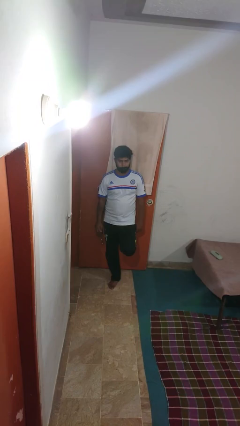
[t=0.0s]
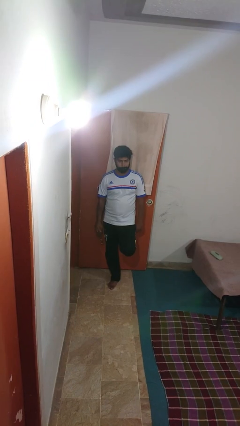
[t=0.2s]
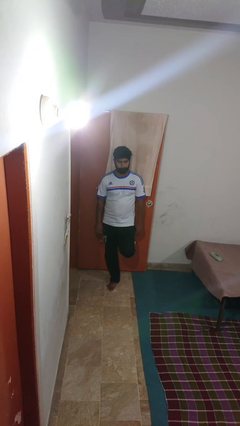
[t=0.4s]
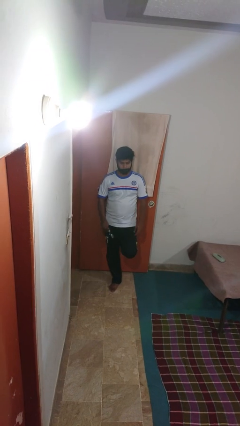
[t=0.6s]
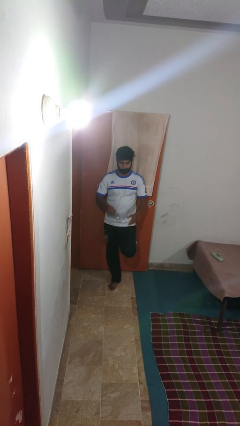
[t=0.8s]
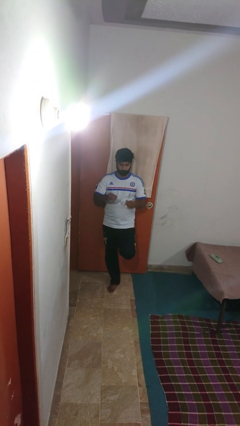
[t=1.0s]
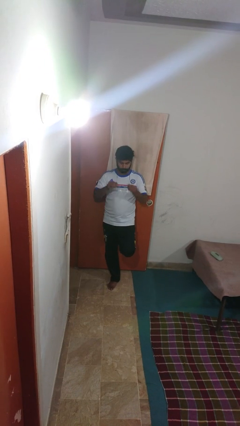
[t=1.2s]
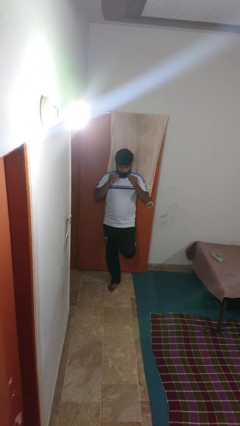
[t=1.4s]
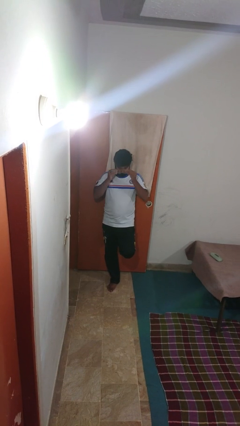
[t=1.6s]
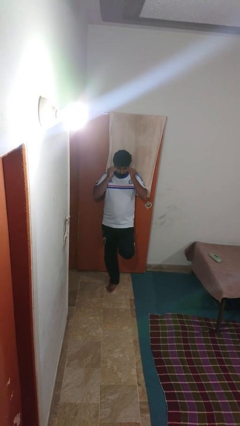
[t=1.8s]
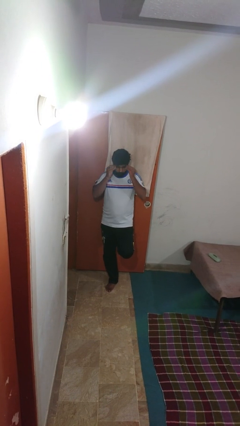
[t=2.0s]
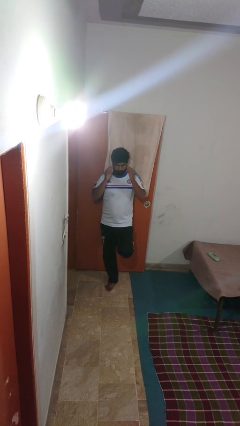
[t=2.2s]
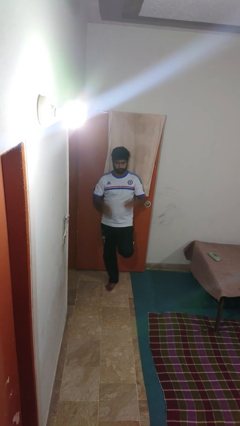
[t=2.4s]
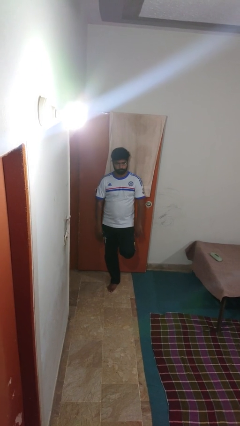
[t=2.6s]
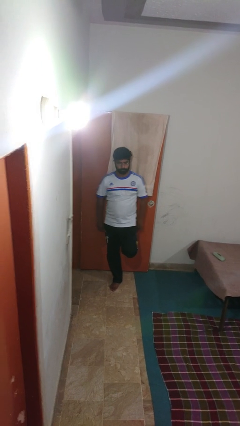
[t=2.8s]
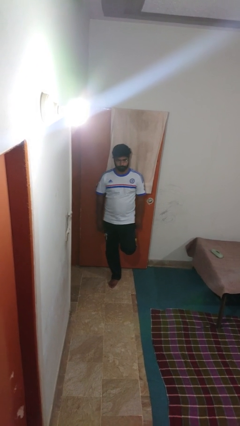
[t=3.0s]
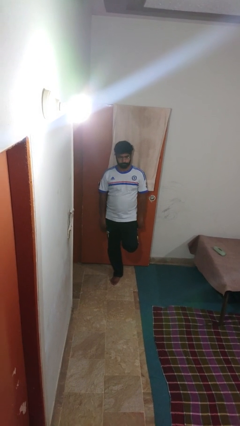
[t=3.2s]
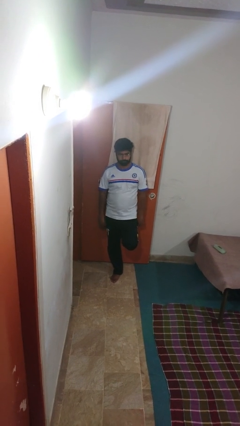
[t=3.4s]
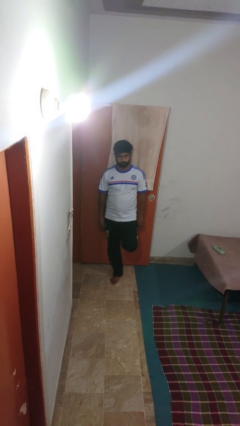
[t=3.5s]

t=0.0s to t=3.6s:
person puts on glasses

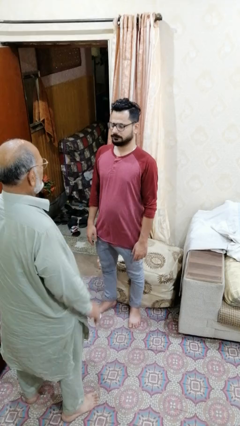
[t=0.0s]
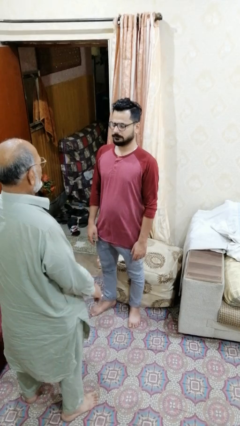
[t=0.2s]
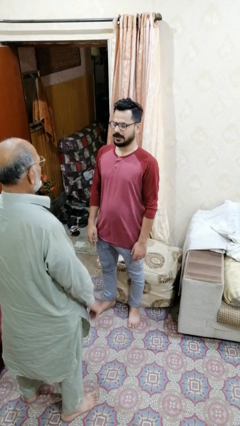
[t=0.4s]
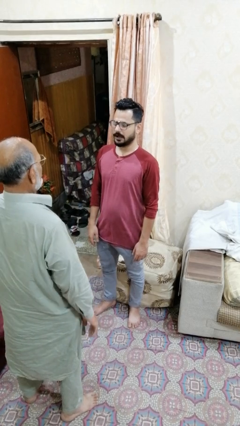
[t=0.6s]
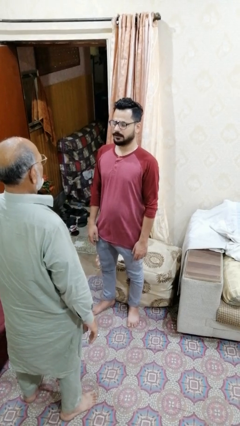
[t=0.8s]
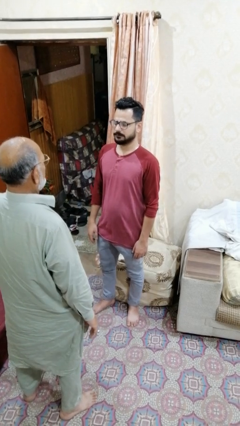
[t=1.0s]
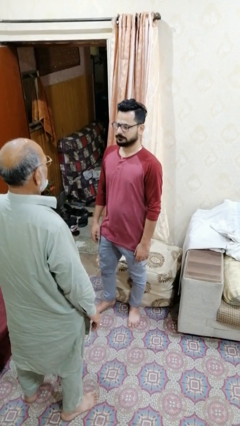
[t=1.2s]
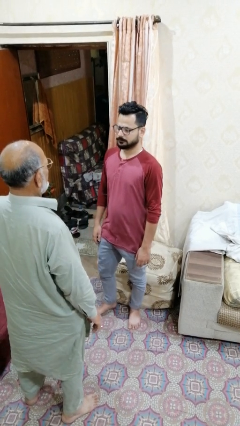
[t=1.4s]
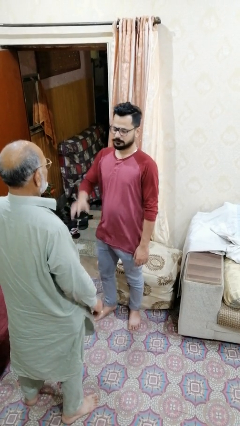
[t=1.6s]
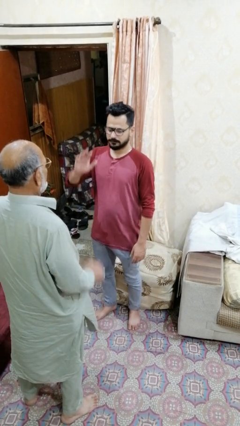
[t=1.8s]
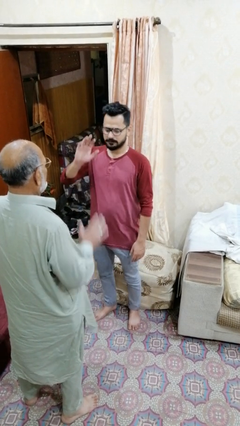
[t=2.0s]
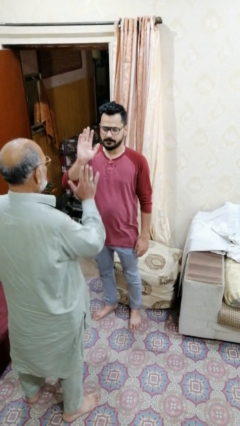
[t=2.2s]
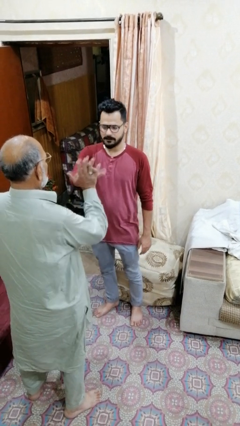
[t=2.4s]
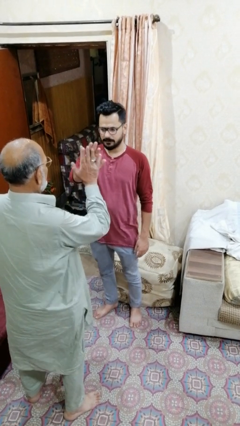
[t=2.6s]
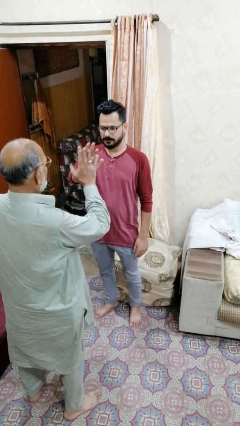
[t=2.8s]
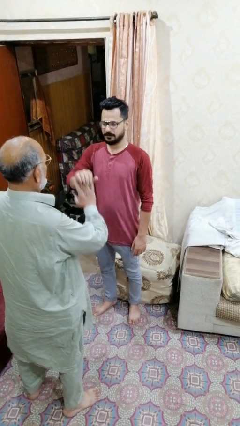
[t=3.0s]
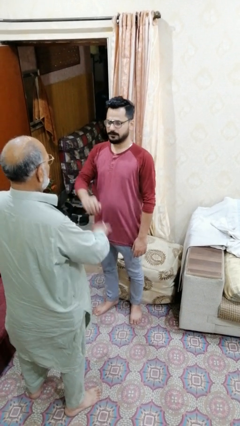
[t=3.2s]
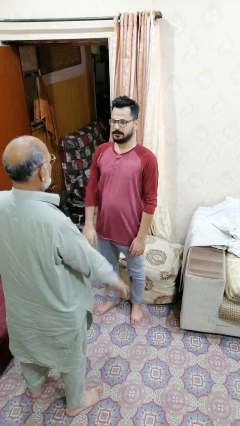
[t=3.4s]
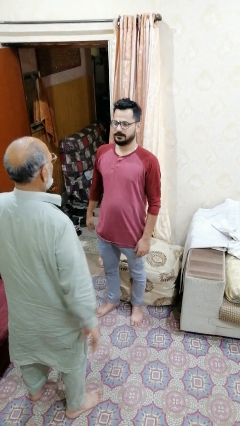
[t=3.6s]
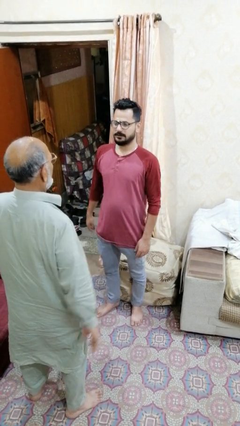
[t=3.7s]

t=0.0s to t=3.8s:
person highfives hand

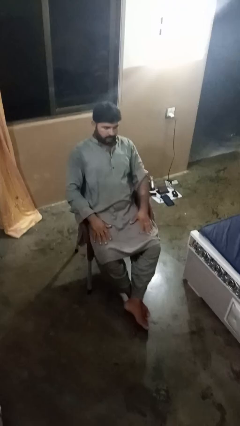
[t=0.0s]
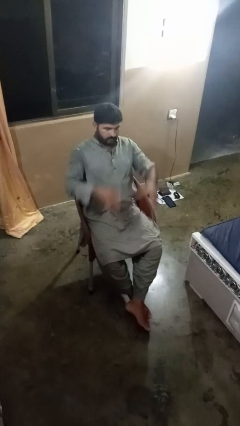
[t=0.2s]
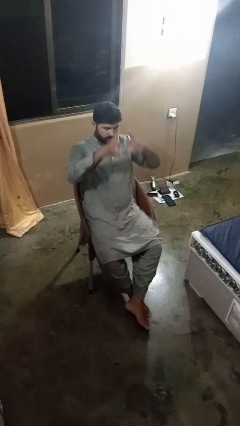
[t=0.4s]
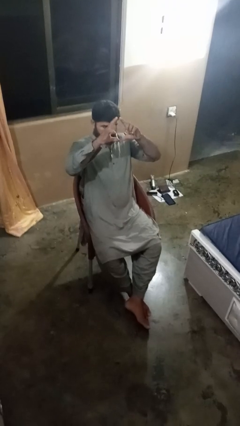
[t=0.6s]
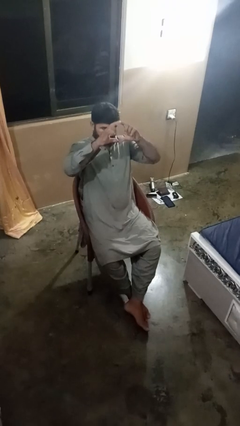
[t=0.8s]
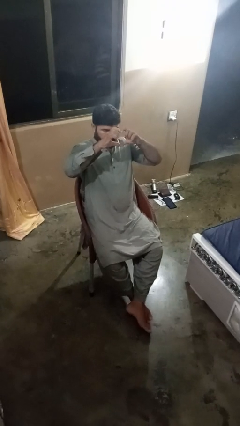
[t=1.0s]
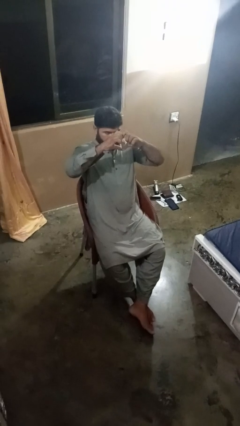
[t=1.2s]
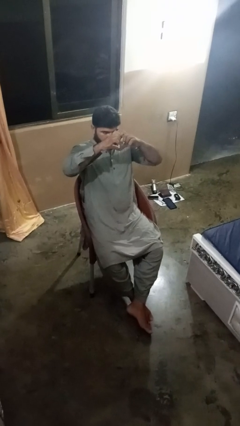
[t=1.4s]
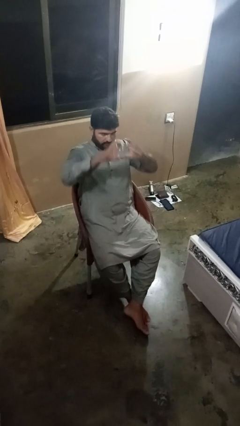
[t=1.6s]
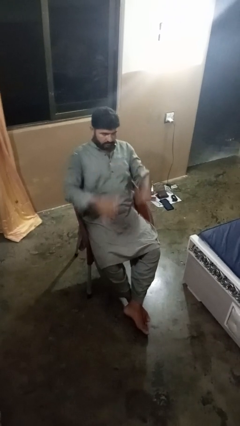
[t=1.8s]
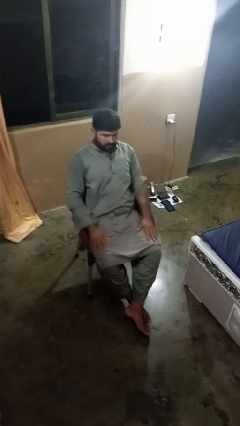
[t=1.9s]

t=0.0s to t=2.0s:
person gestures heart

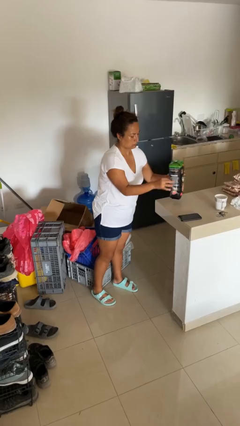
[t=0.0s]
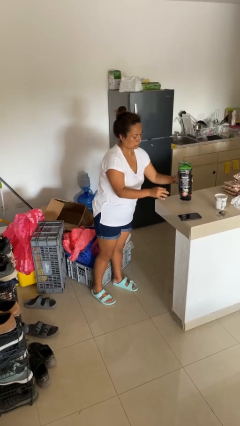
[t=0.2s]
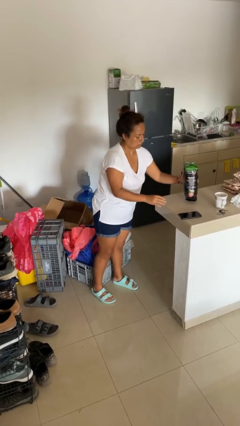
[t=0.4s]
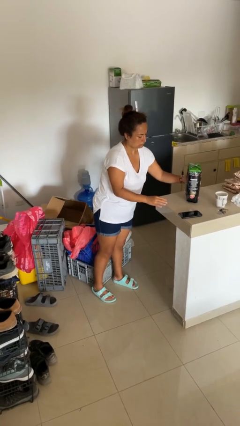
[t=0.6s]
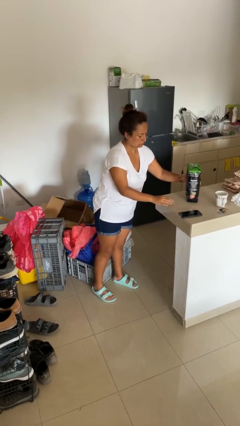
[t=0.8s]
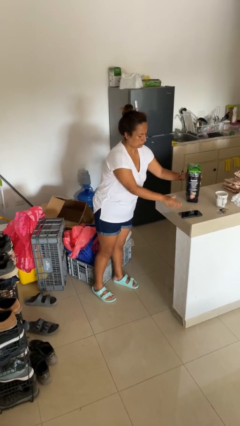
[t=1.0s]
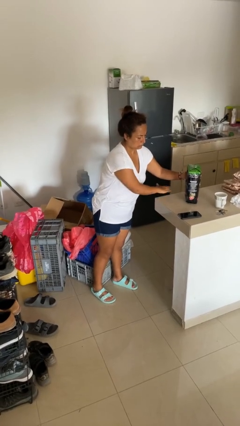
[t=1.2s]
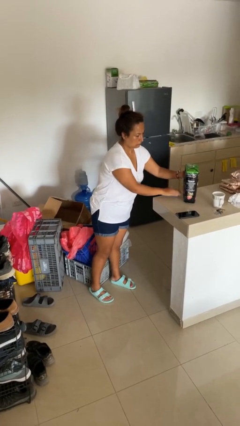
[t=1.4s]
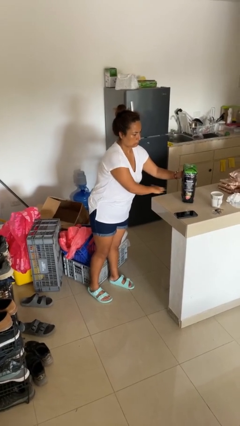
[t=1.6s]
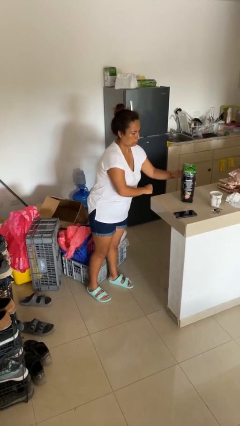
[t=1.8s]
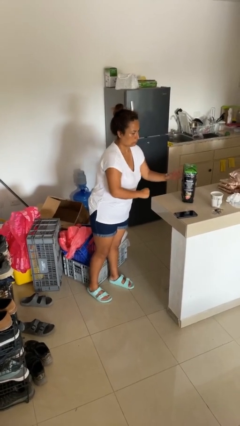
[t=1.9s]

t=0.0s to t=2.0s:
person puts down object on countertop

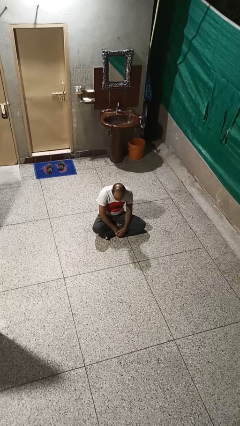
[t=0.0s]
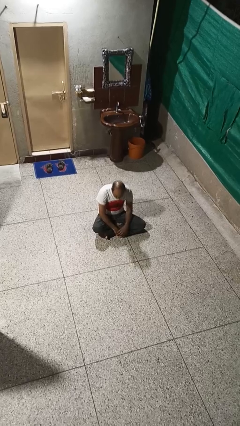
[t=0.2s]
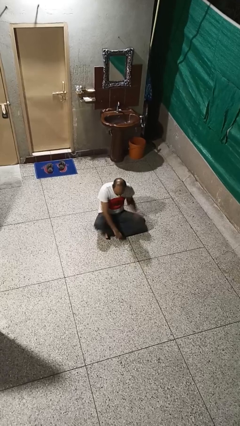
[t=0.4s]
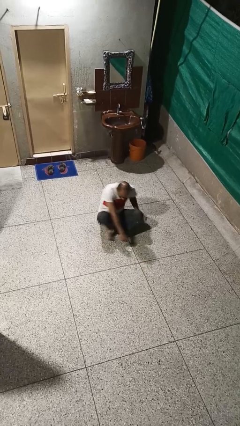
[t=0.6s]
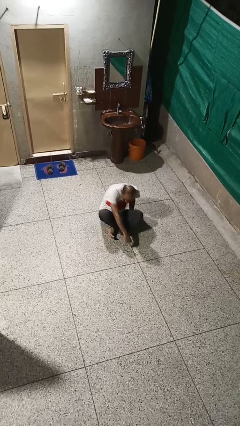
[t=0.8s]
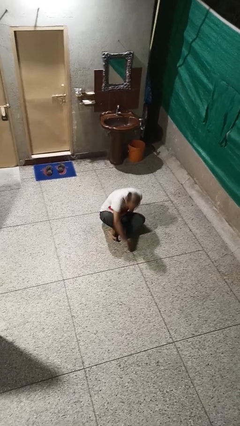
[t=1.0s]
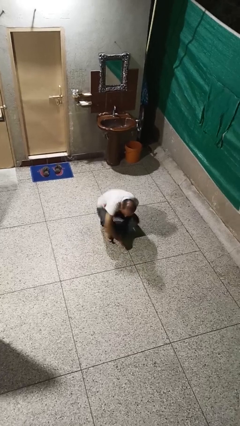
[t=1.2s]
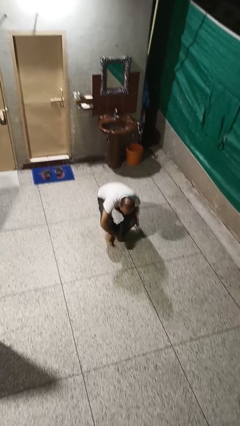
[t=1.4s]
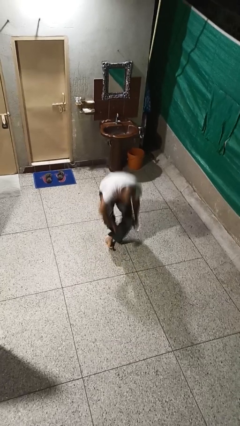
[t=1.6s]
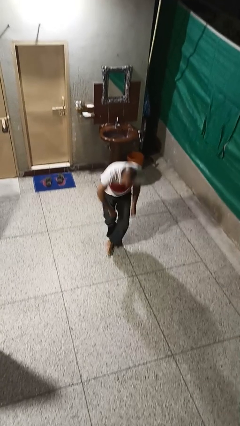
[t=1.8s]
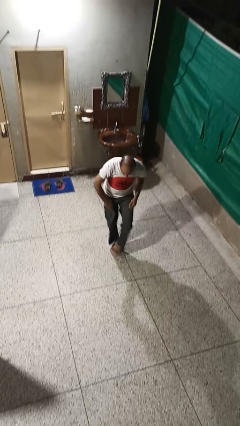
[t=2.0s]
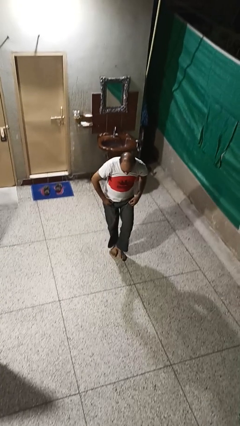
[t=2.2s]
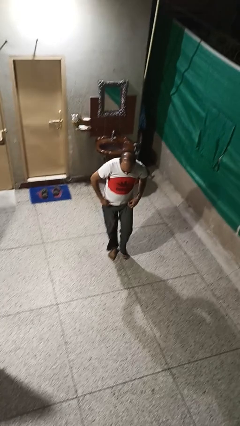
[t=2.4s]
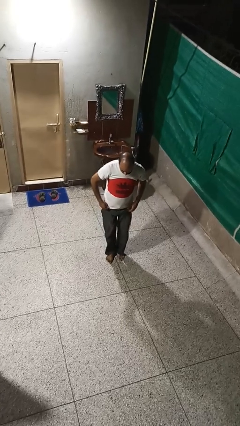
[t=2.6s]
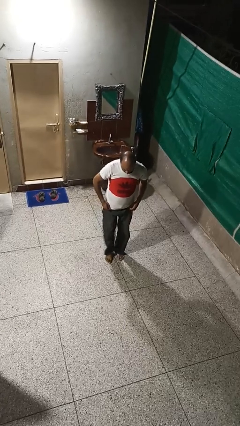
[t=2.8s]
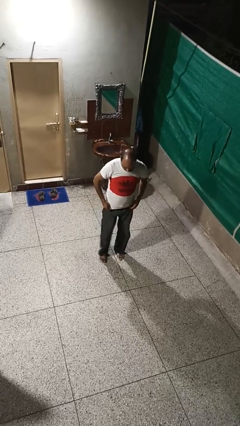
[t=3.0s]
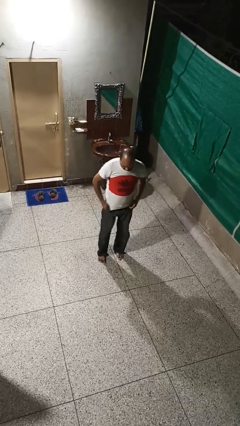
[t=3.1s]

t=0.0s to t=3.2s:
person stands up from floor

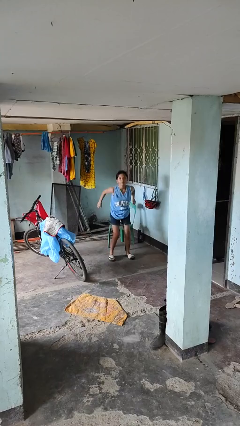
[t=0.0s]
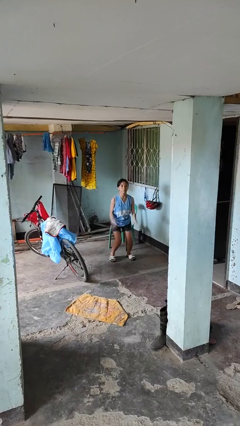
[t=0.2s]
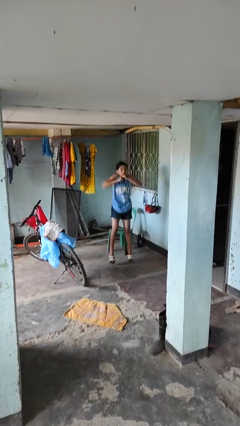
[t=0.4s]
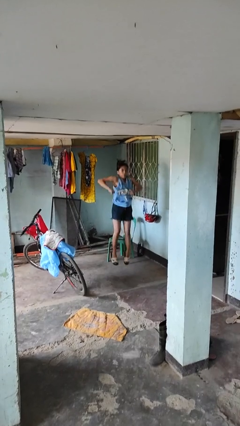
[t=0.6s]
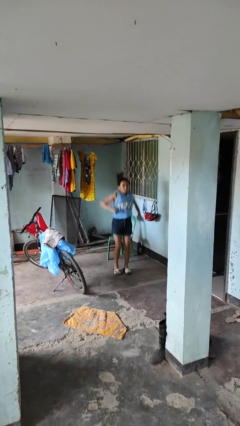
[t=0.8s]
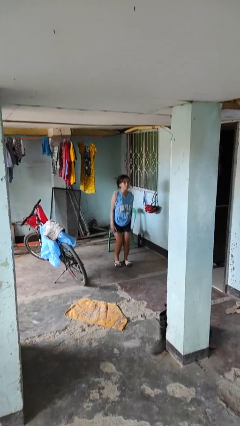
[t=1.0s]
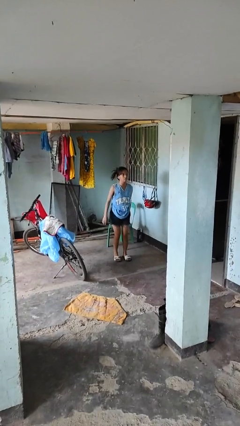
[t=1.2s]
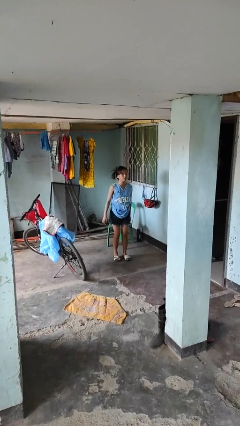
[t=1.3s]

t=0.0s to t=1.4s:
person jumps

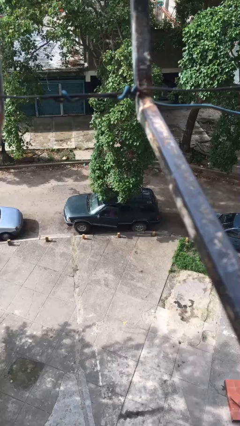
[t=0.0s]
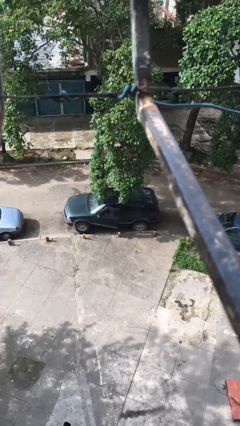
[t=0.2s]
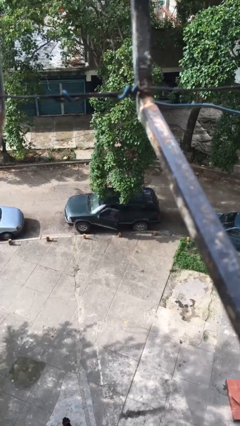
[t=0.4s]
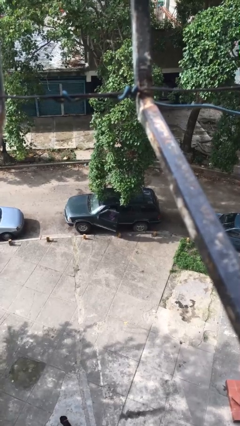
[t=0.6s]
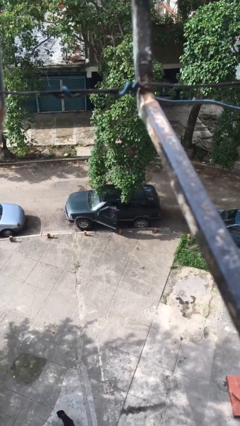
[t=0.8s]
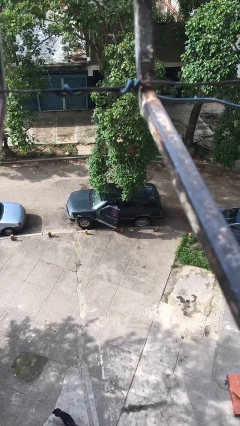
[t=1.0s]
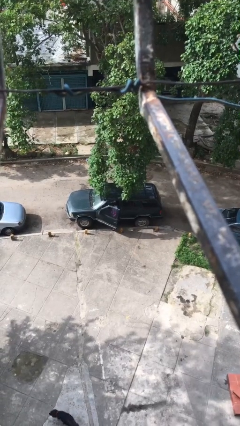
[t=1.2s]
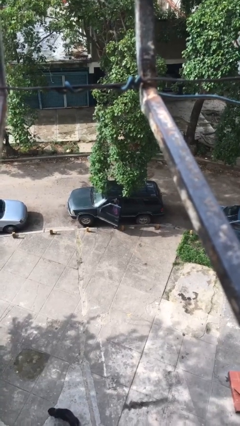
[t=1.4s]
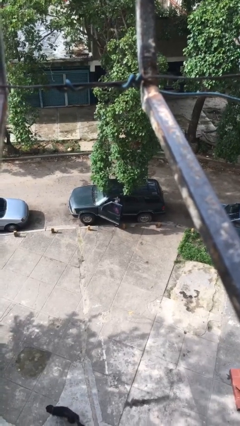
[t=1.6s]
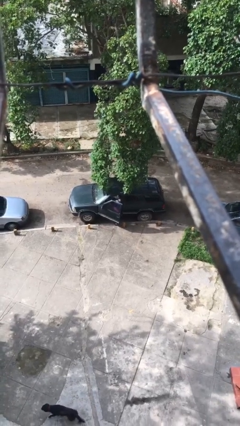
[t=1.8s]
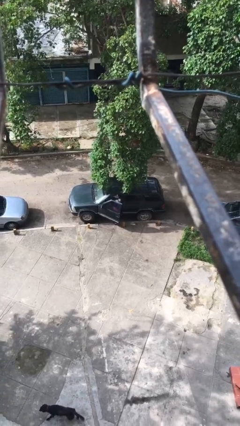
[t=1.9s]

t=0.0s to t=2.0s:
person opens car door
